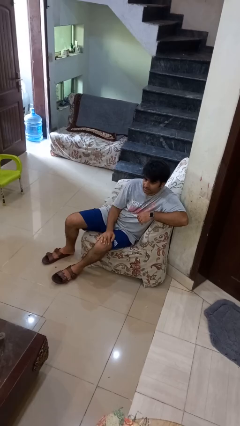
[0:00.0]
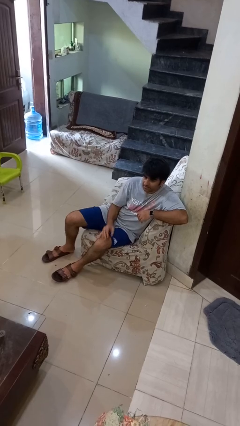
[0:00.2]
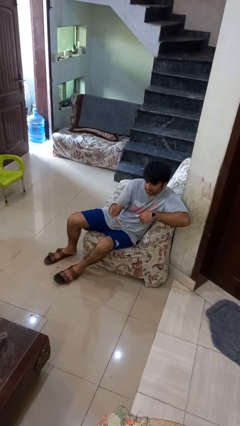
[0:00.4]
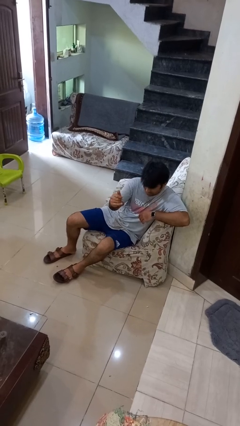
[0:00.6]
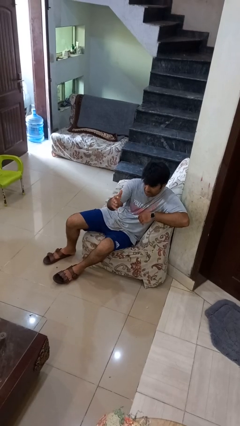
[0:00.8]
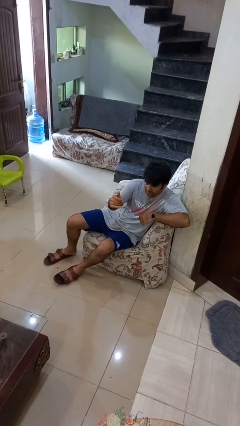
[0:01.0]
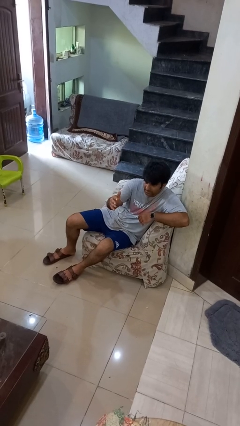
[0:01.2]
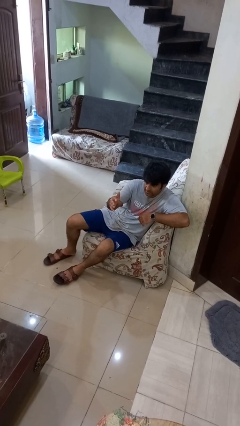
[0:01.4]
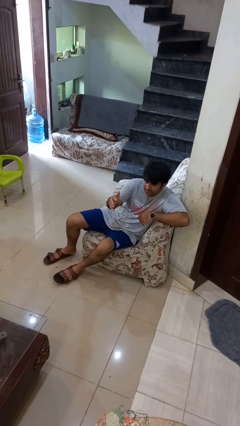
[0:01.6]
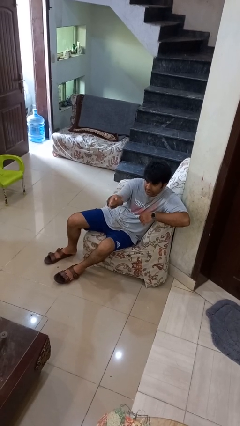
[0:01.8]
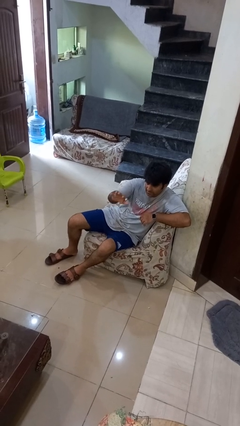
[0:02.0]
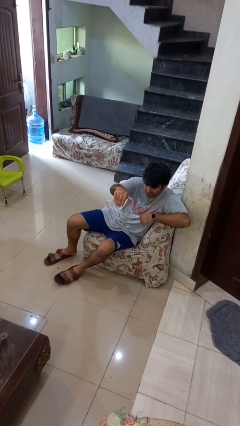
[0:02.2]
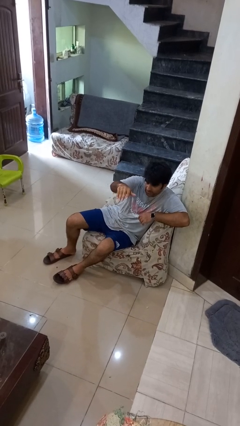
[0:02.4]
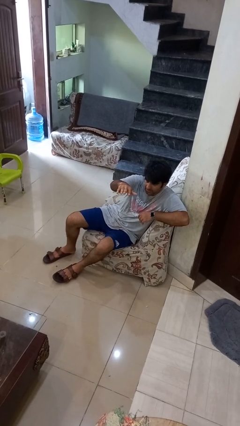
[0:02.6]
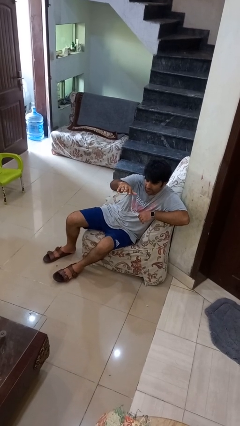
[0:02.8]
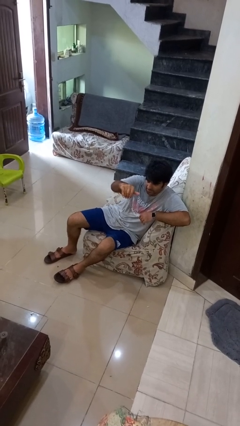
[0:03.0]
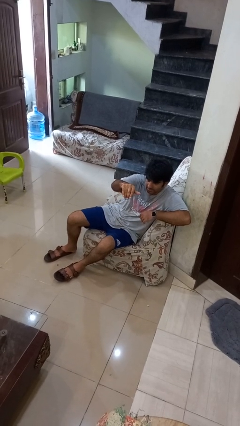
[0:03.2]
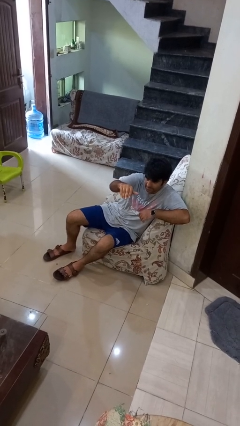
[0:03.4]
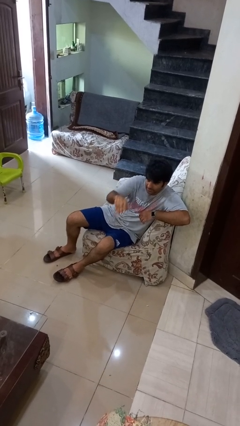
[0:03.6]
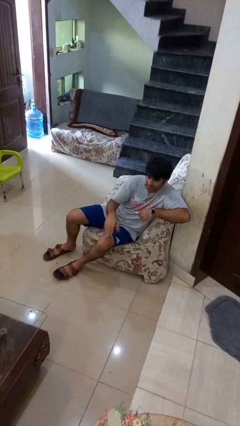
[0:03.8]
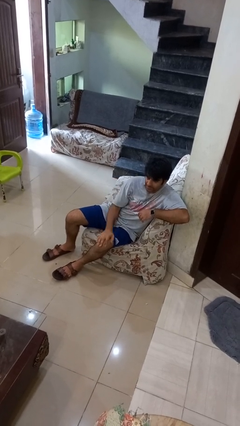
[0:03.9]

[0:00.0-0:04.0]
person gestures come here

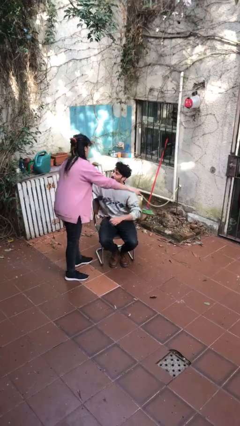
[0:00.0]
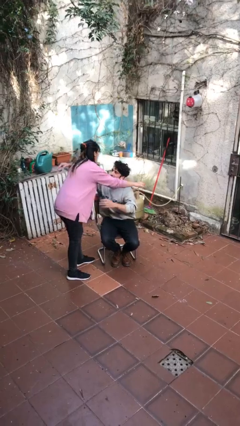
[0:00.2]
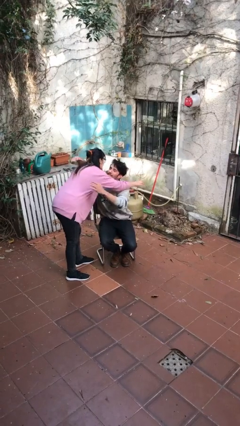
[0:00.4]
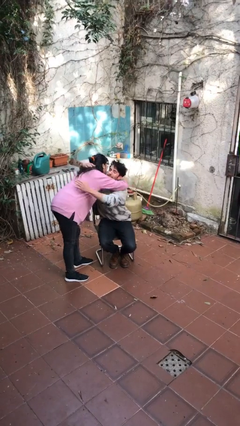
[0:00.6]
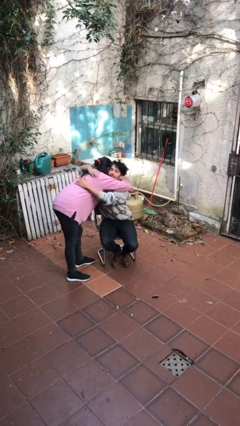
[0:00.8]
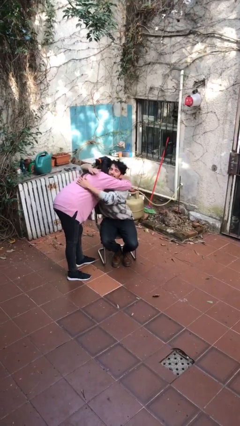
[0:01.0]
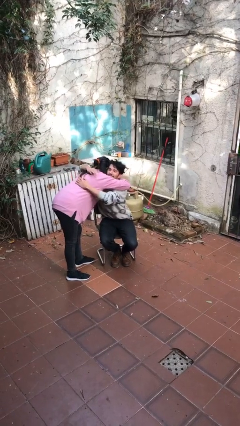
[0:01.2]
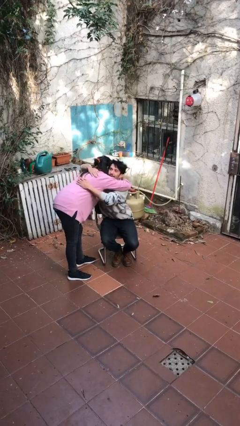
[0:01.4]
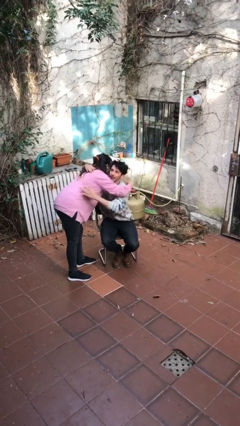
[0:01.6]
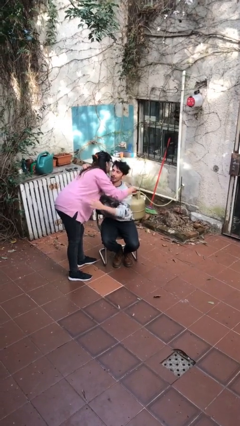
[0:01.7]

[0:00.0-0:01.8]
person embraces person

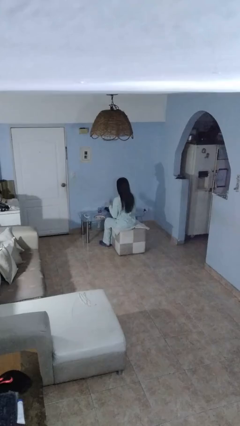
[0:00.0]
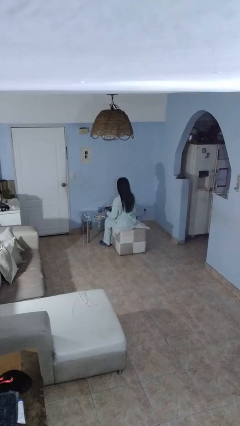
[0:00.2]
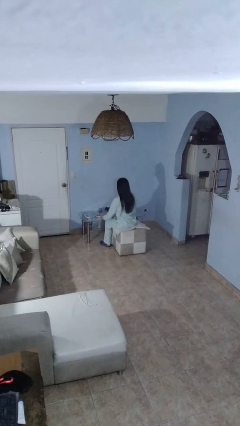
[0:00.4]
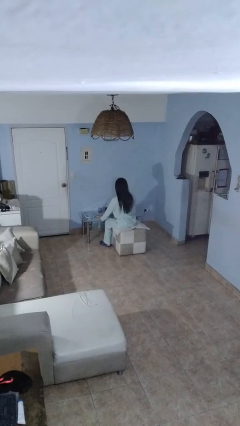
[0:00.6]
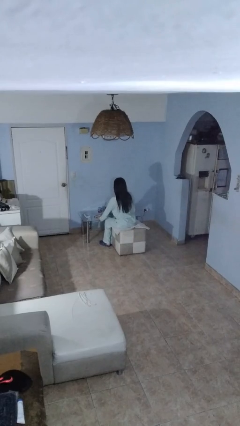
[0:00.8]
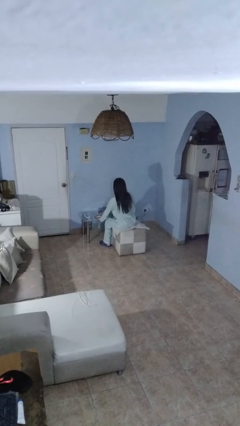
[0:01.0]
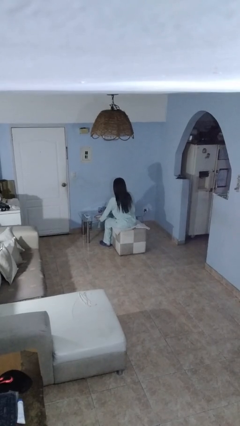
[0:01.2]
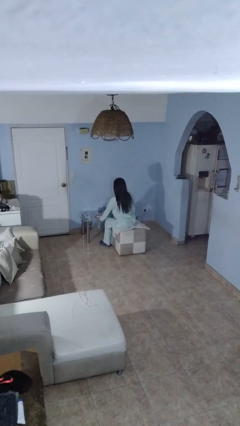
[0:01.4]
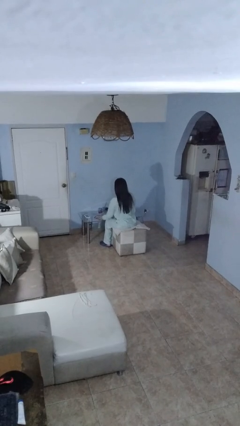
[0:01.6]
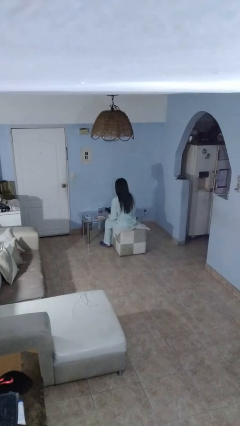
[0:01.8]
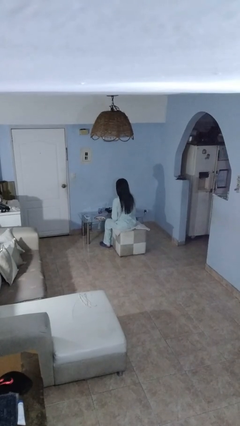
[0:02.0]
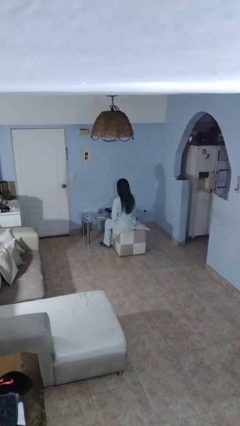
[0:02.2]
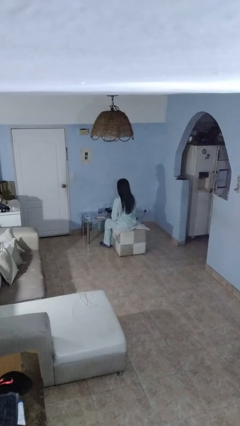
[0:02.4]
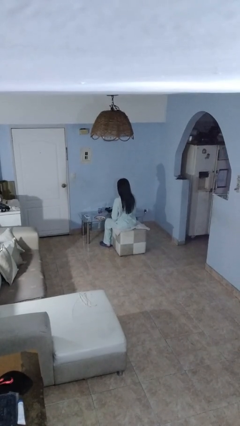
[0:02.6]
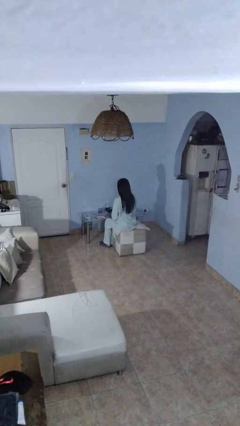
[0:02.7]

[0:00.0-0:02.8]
person turns off lamp

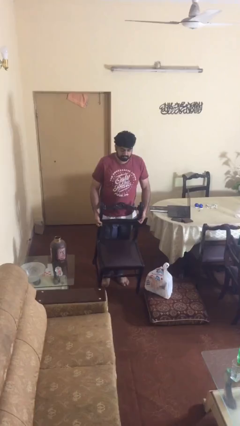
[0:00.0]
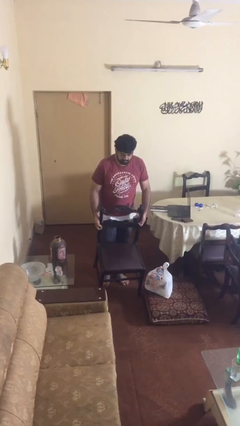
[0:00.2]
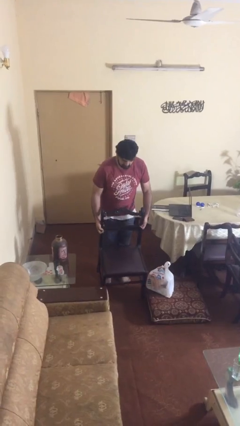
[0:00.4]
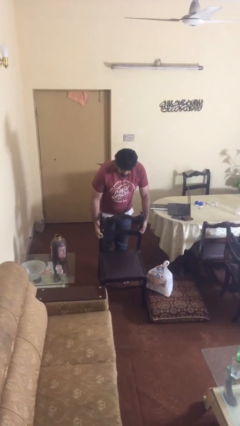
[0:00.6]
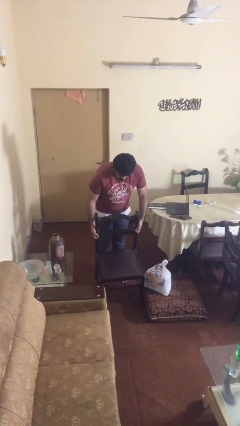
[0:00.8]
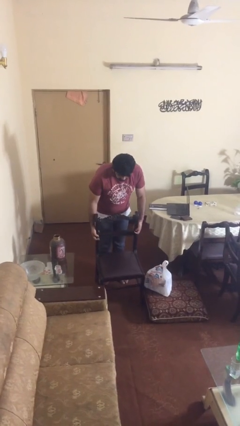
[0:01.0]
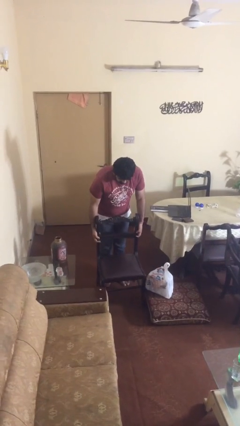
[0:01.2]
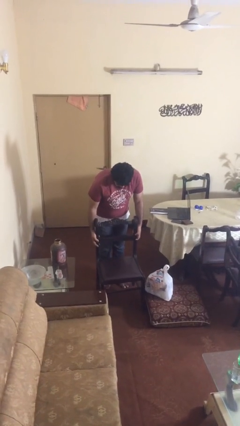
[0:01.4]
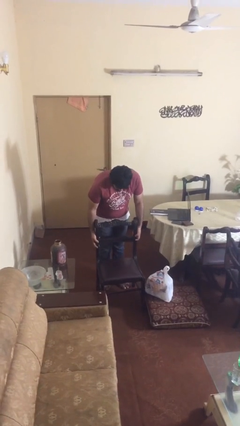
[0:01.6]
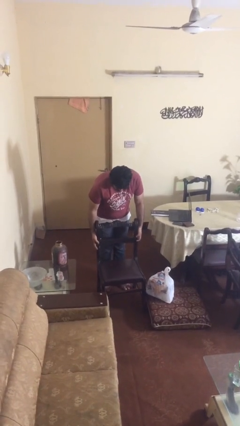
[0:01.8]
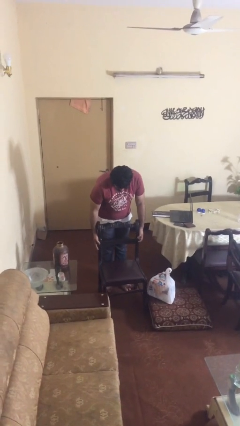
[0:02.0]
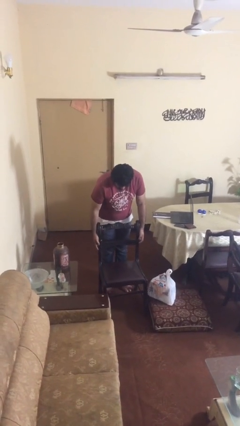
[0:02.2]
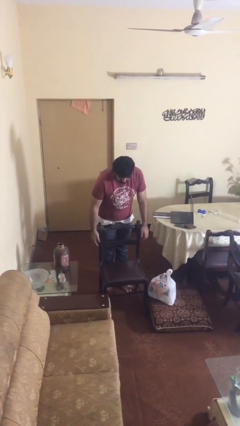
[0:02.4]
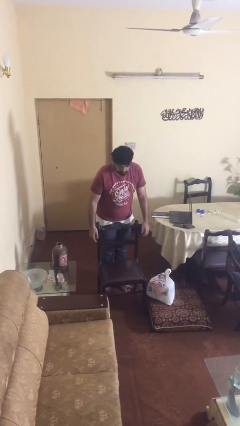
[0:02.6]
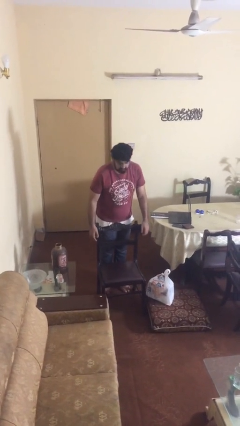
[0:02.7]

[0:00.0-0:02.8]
person puts down object on floor

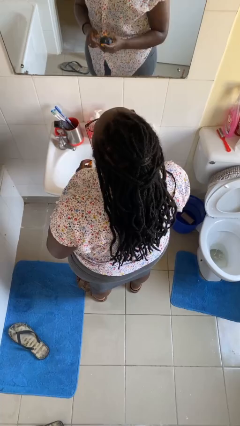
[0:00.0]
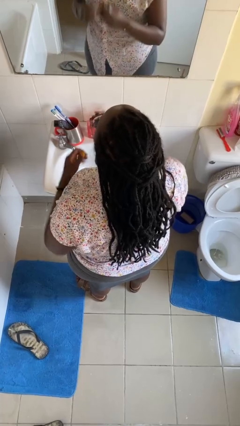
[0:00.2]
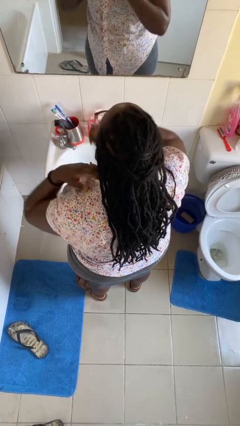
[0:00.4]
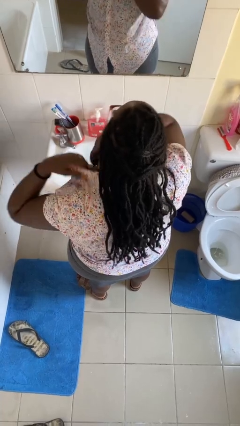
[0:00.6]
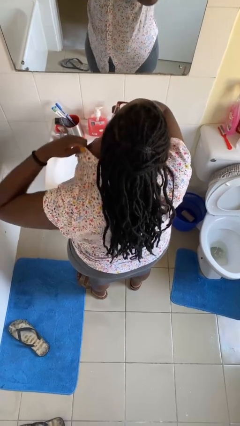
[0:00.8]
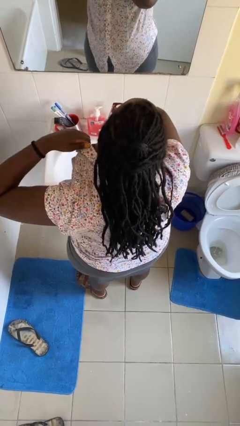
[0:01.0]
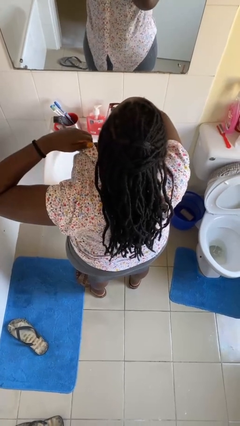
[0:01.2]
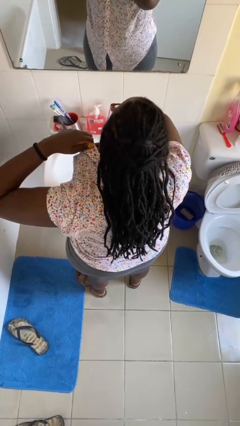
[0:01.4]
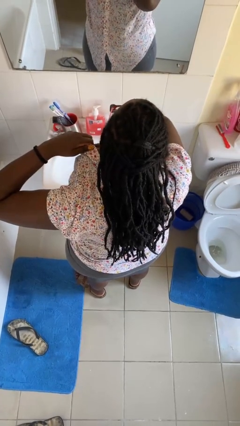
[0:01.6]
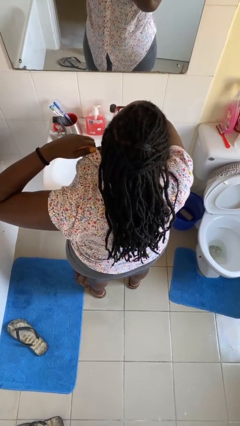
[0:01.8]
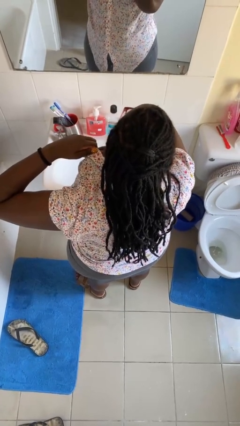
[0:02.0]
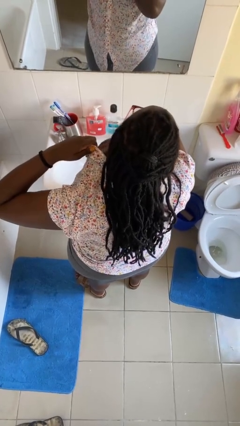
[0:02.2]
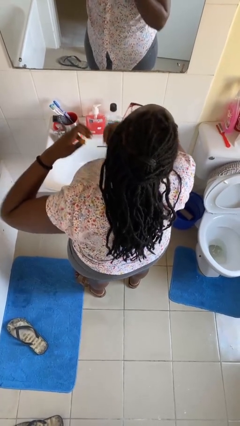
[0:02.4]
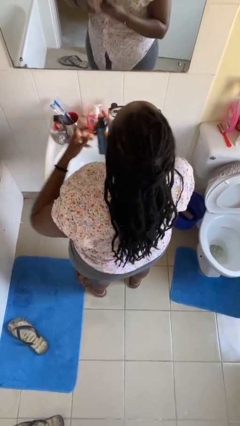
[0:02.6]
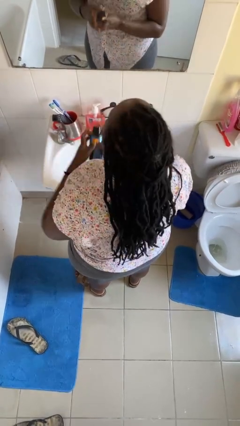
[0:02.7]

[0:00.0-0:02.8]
person applies deodorant

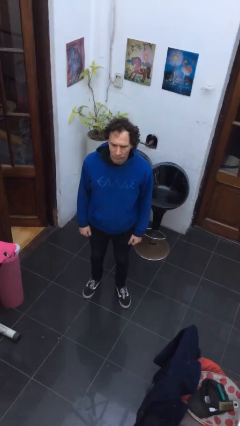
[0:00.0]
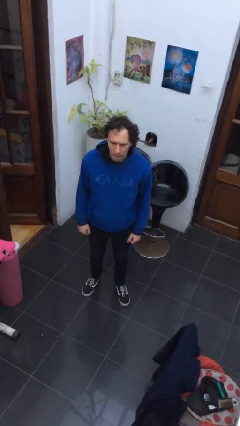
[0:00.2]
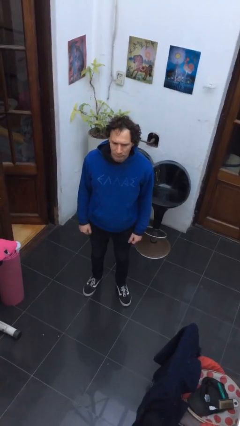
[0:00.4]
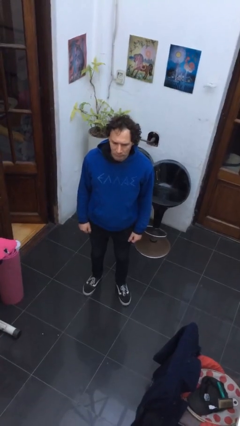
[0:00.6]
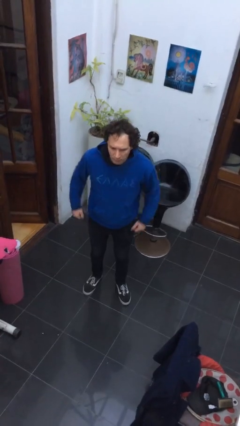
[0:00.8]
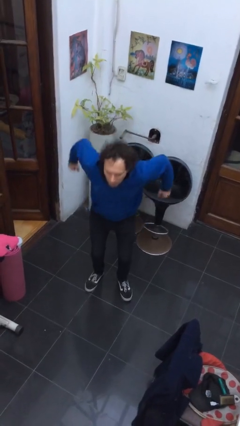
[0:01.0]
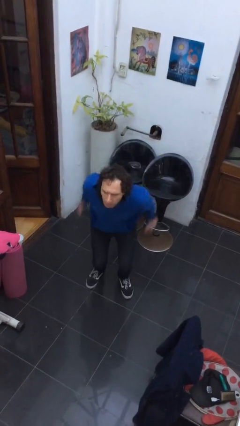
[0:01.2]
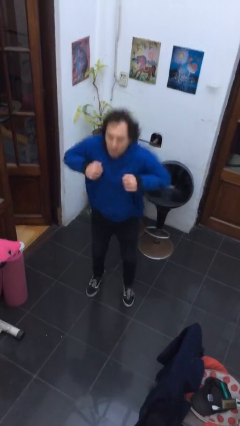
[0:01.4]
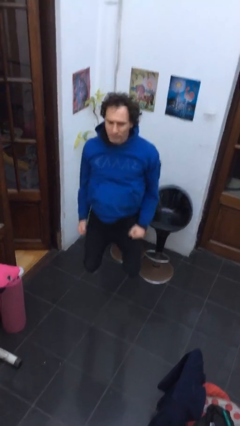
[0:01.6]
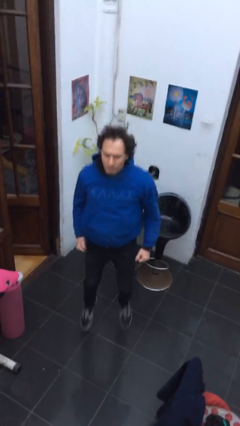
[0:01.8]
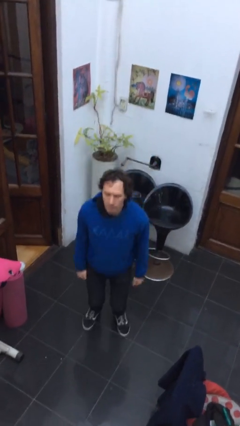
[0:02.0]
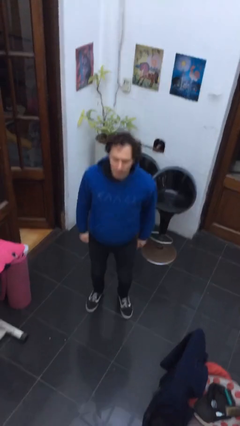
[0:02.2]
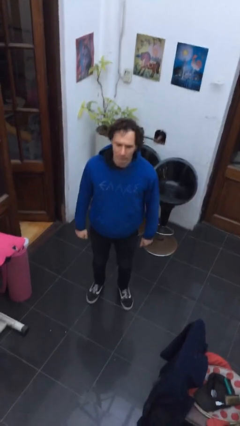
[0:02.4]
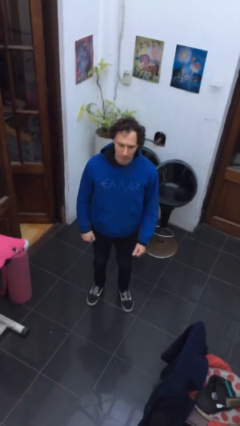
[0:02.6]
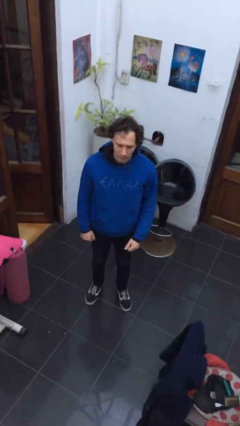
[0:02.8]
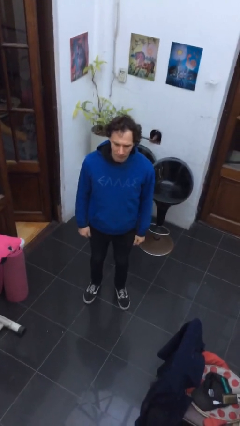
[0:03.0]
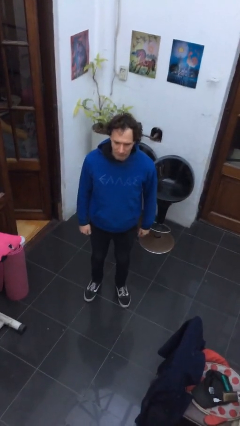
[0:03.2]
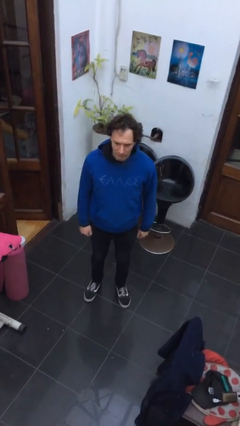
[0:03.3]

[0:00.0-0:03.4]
person jumps
